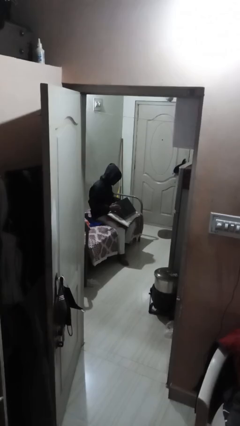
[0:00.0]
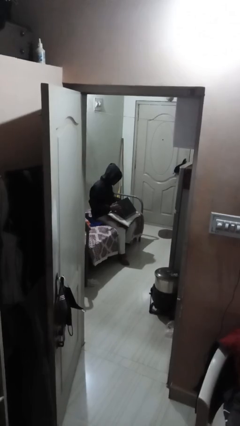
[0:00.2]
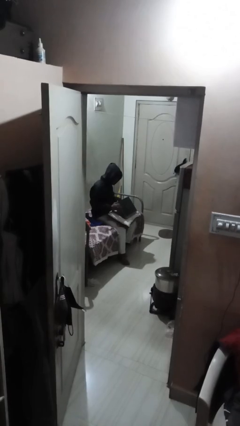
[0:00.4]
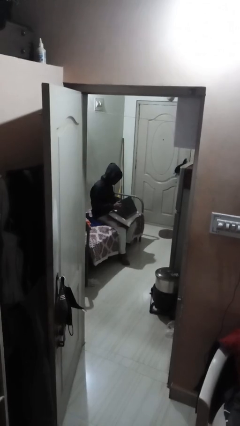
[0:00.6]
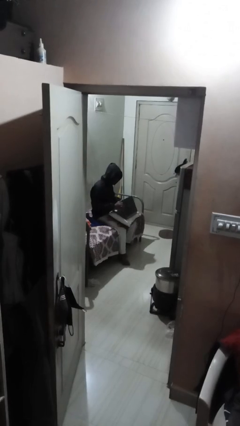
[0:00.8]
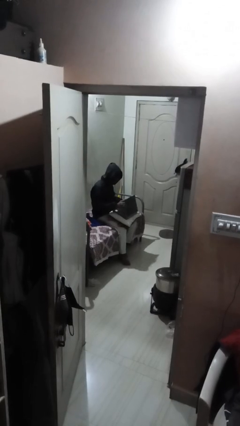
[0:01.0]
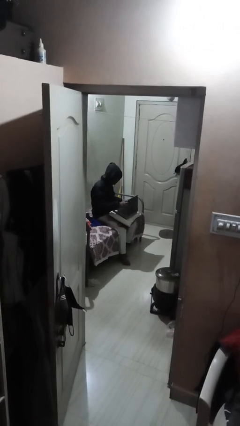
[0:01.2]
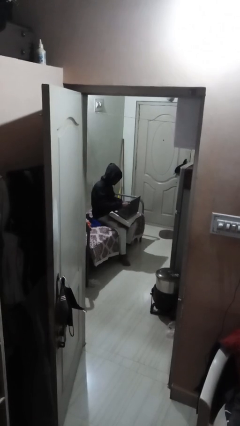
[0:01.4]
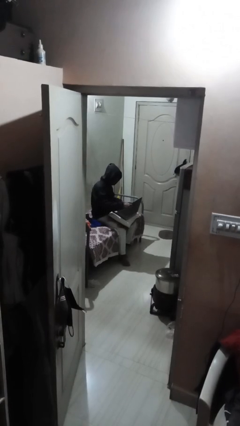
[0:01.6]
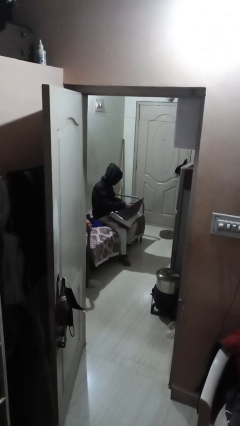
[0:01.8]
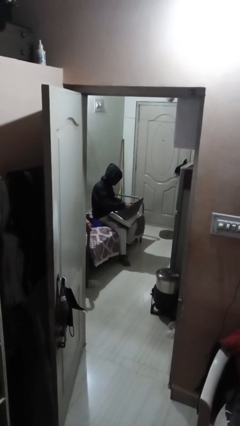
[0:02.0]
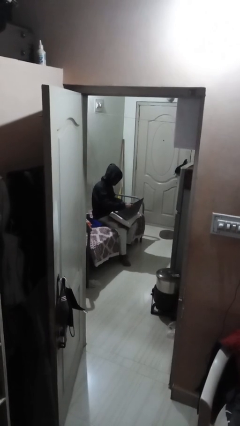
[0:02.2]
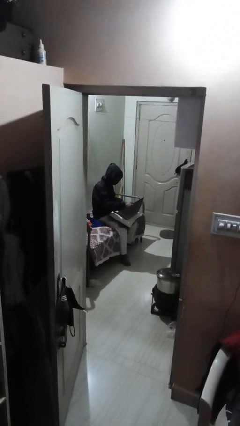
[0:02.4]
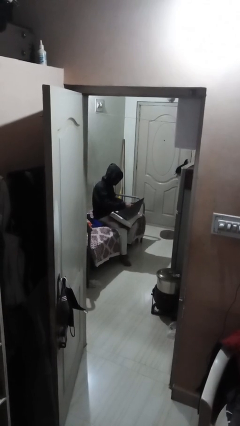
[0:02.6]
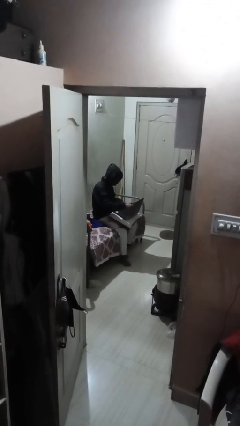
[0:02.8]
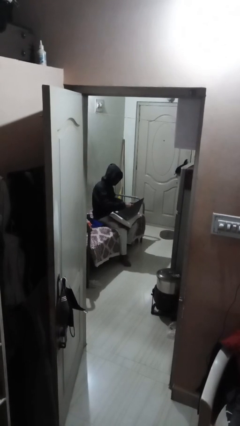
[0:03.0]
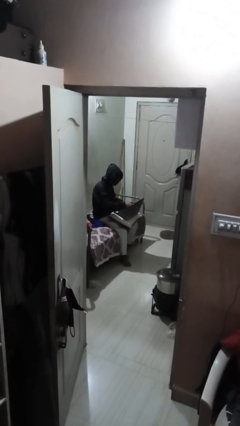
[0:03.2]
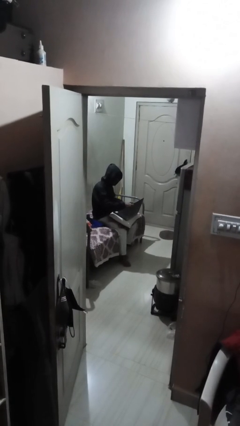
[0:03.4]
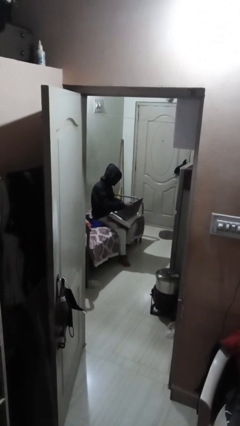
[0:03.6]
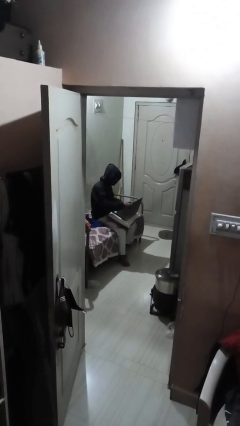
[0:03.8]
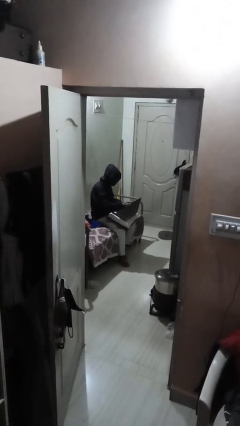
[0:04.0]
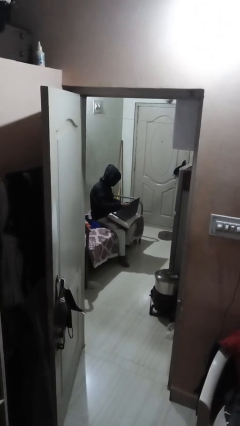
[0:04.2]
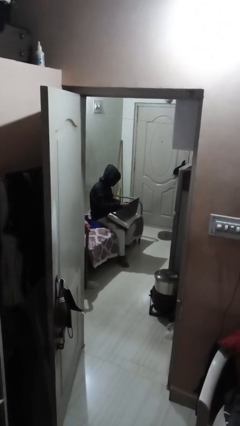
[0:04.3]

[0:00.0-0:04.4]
person interacts with laptop

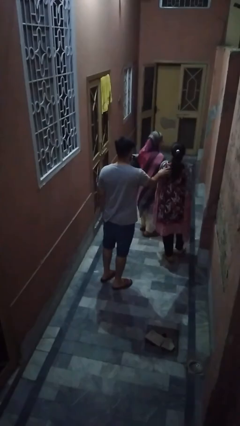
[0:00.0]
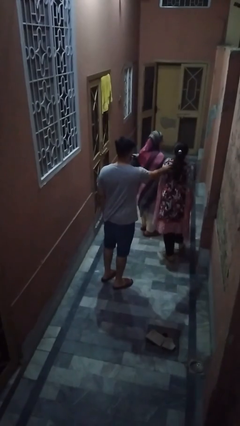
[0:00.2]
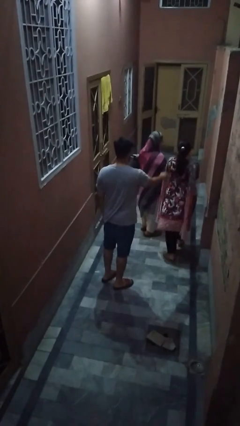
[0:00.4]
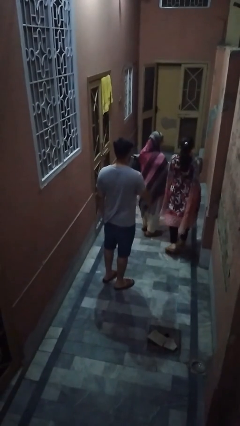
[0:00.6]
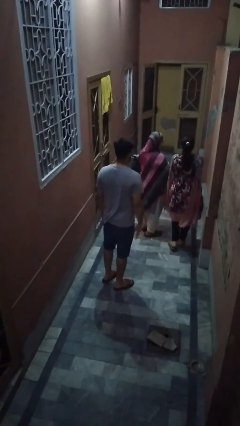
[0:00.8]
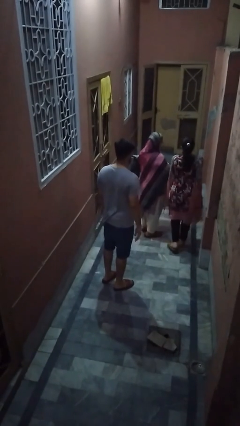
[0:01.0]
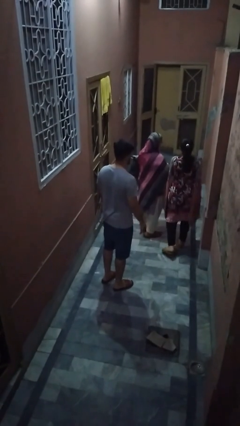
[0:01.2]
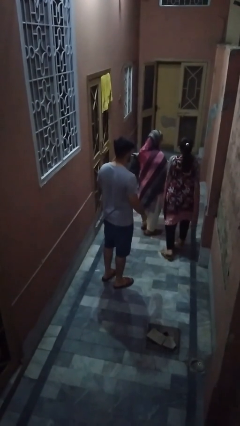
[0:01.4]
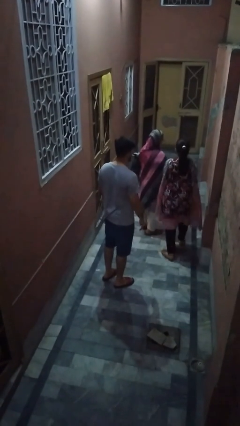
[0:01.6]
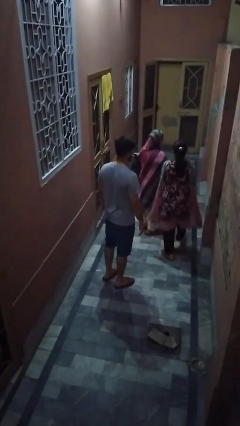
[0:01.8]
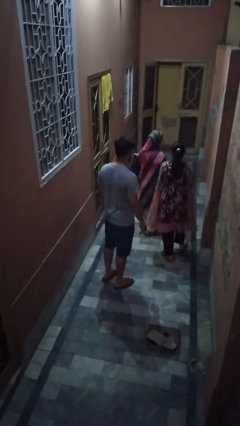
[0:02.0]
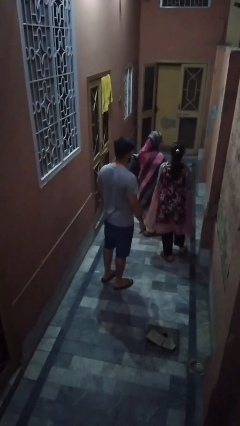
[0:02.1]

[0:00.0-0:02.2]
person shoves person

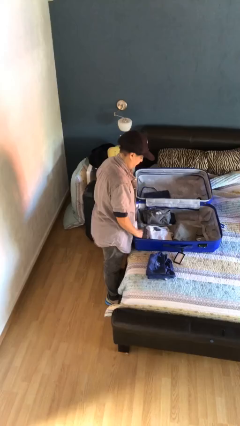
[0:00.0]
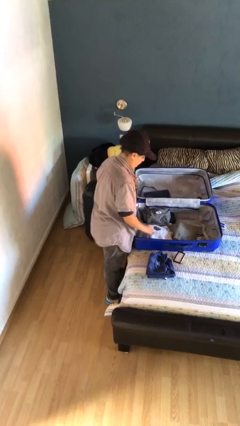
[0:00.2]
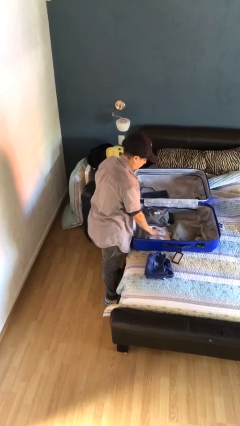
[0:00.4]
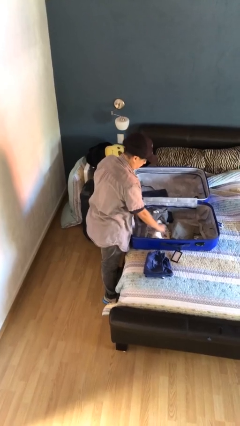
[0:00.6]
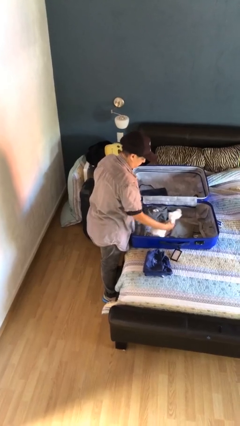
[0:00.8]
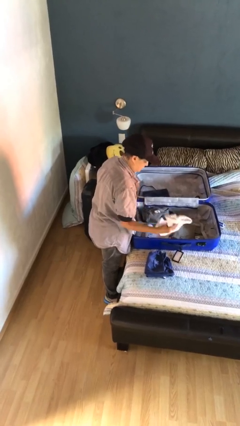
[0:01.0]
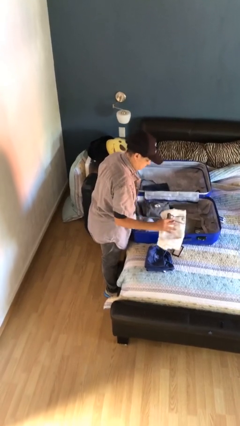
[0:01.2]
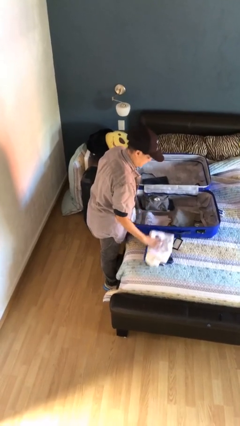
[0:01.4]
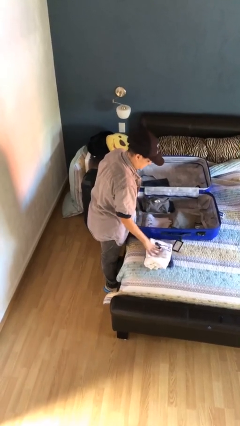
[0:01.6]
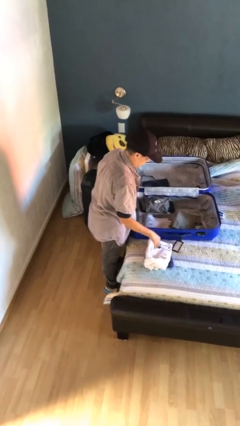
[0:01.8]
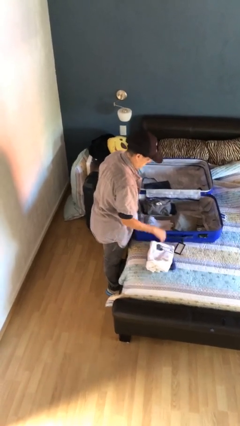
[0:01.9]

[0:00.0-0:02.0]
person unloads clothes from suitcase

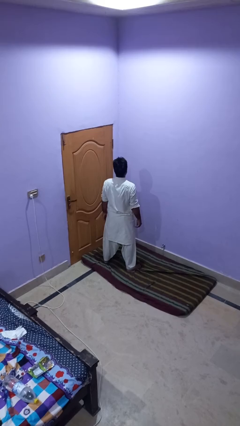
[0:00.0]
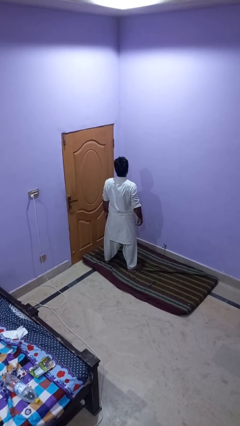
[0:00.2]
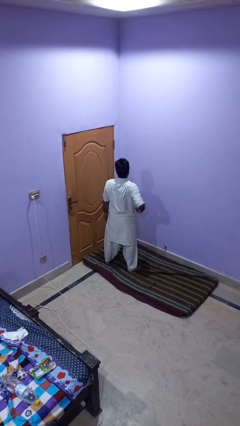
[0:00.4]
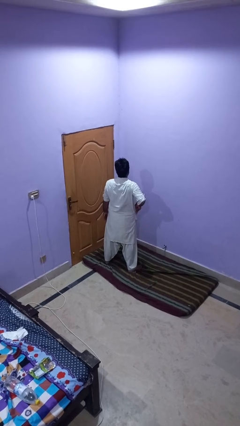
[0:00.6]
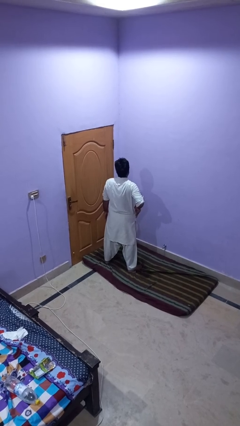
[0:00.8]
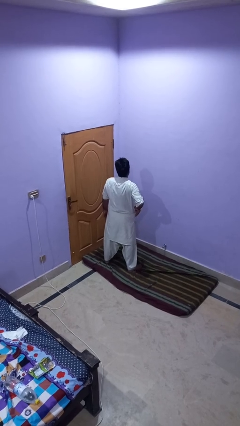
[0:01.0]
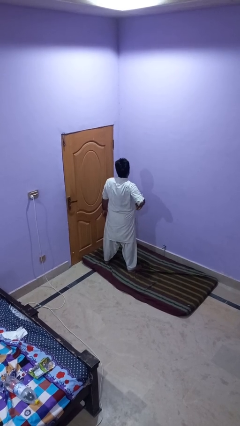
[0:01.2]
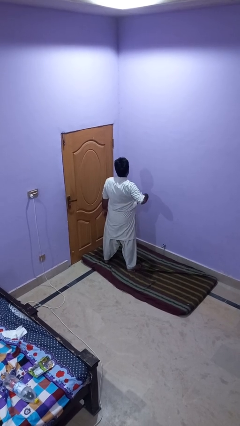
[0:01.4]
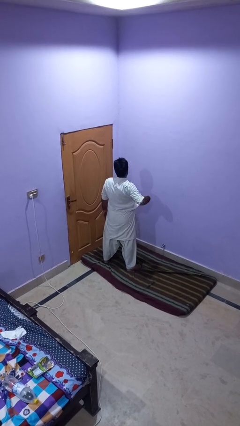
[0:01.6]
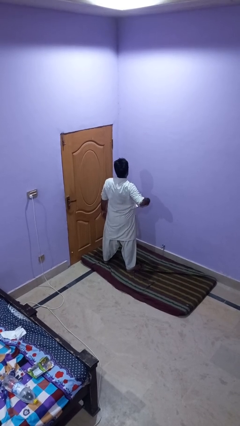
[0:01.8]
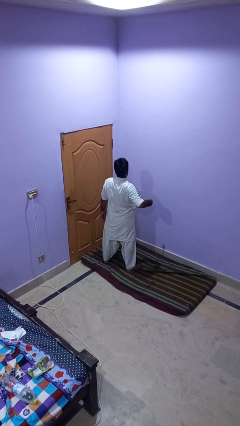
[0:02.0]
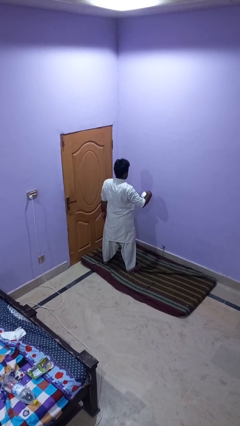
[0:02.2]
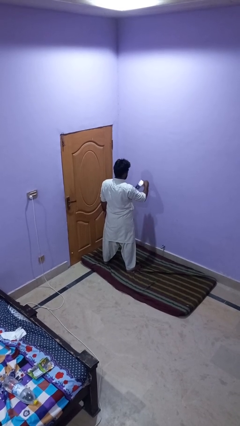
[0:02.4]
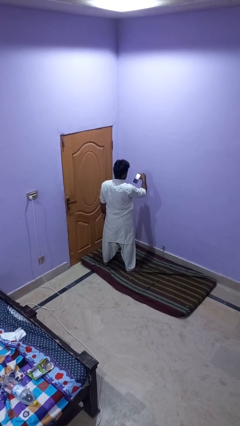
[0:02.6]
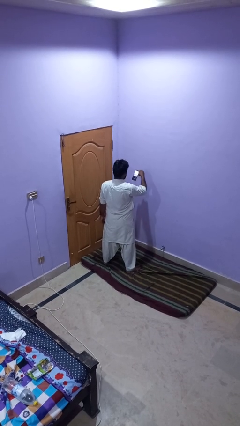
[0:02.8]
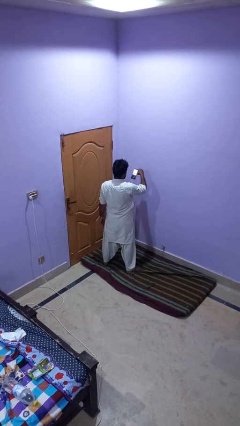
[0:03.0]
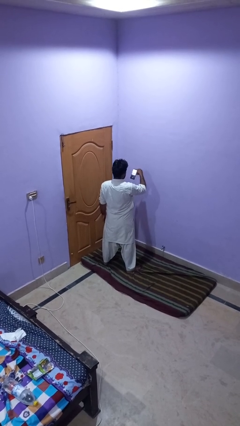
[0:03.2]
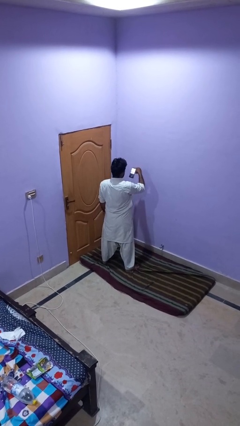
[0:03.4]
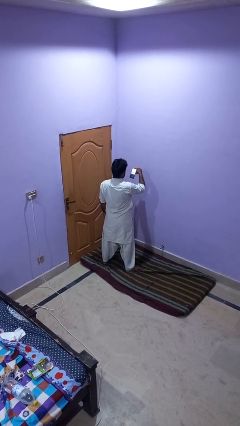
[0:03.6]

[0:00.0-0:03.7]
person takes phone from pocket

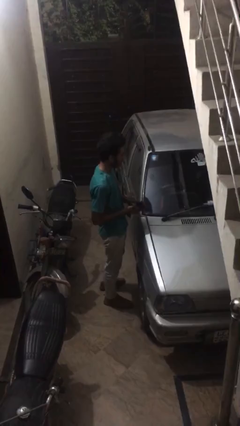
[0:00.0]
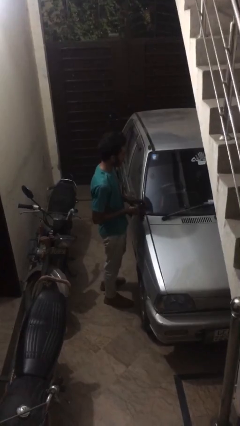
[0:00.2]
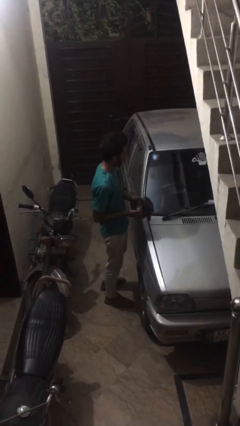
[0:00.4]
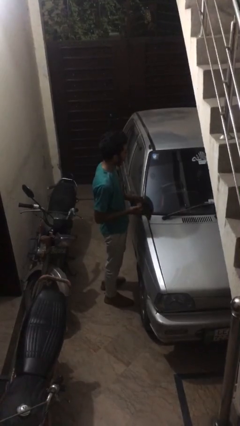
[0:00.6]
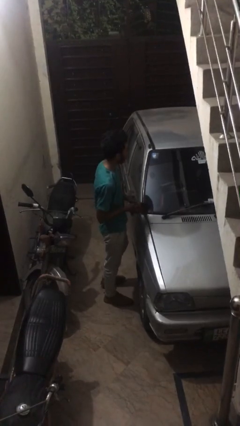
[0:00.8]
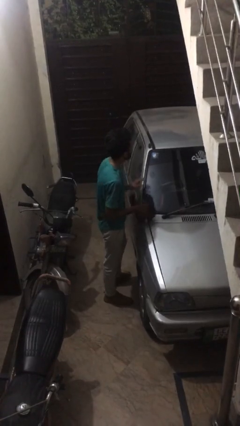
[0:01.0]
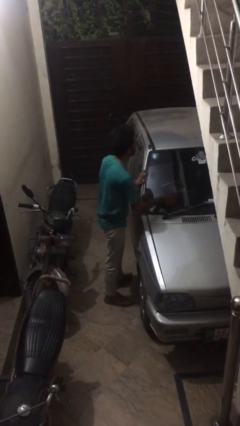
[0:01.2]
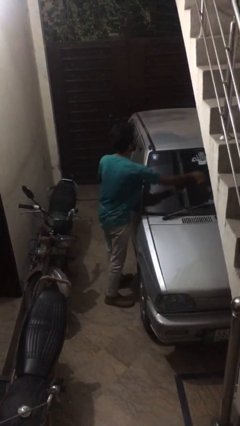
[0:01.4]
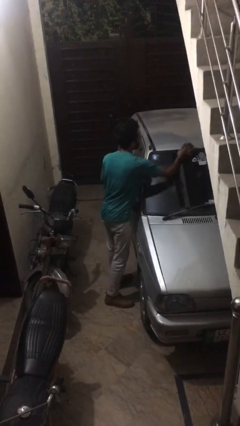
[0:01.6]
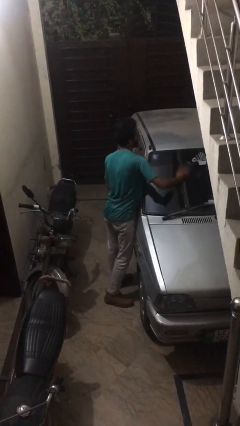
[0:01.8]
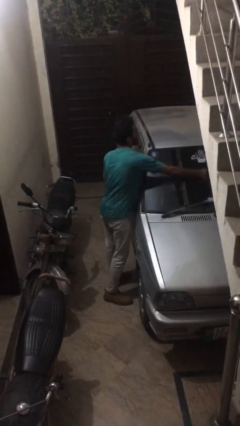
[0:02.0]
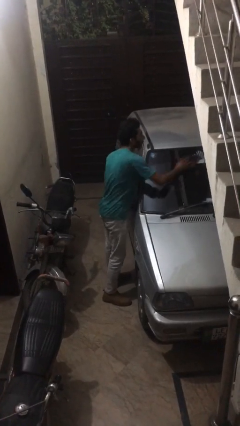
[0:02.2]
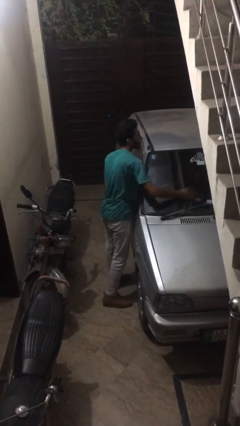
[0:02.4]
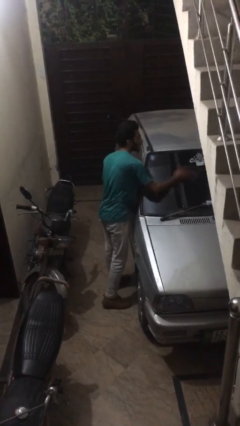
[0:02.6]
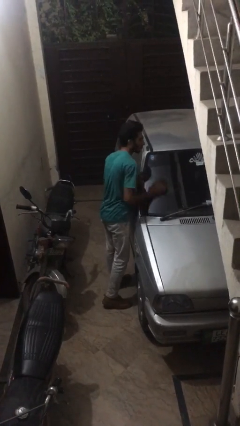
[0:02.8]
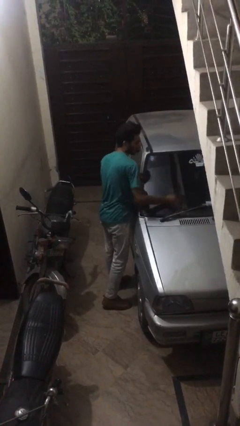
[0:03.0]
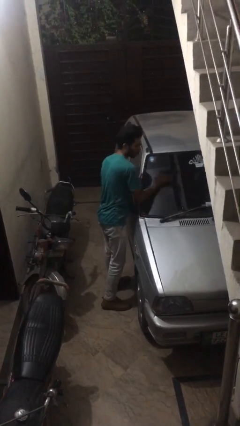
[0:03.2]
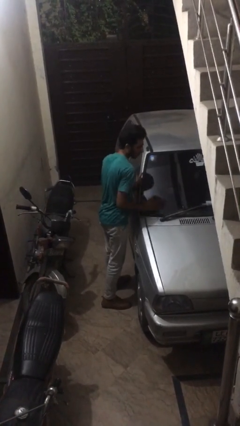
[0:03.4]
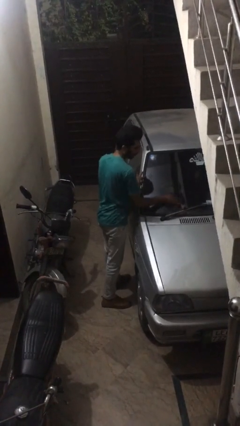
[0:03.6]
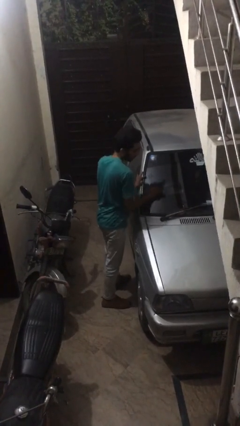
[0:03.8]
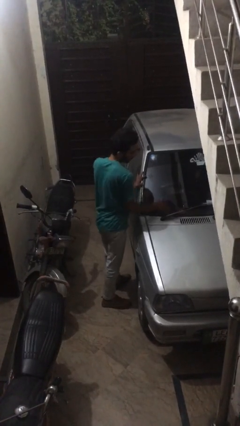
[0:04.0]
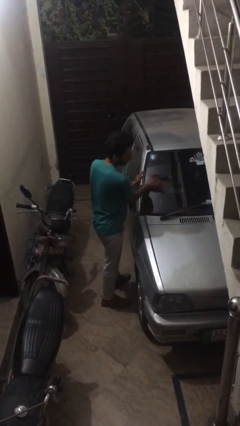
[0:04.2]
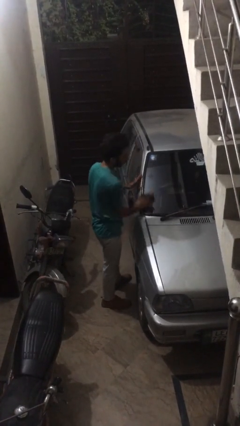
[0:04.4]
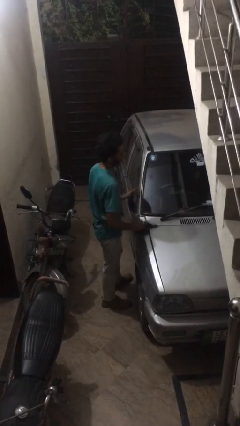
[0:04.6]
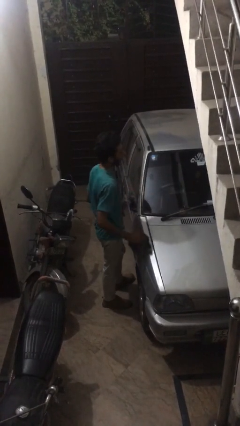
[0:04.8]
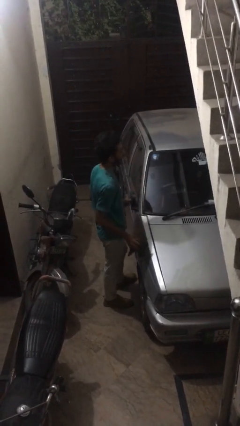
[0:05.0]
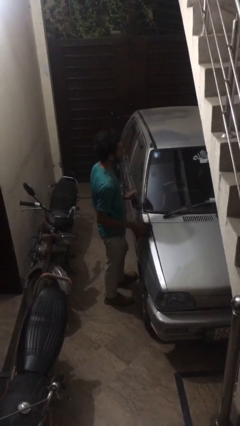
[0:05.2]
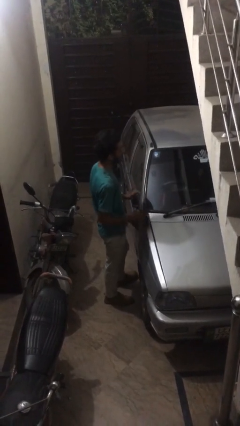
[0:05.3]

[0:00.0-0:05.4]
person polishes car with rag

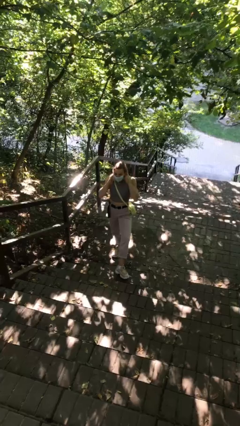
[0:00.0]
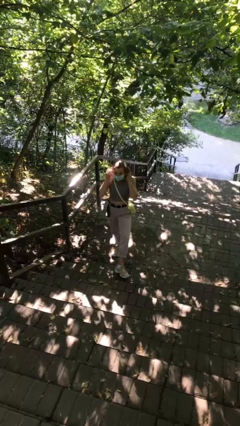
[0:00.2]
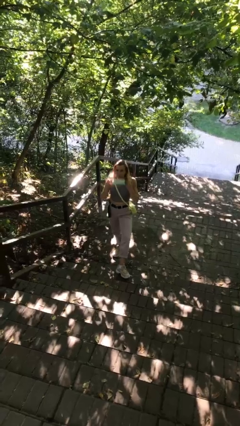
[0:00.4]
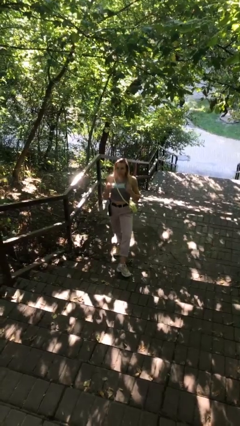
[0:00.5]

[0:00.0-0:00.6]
person takes off facemask
